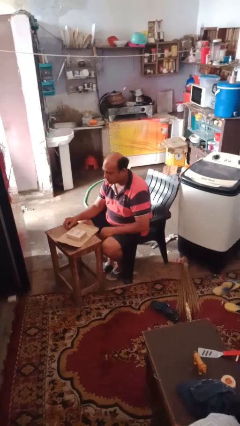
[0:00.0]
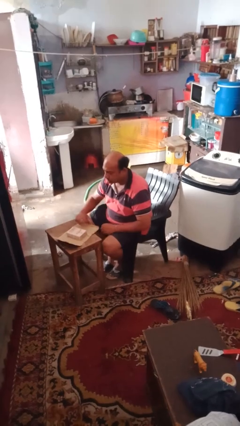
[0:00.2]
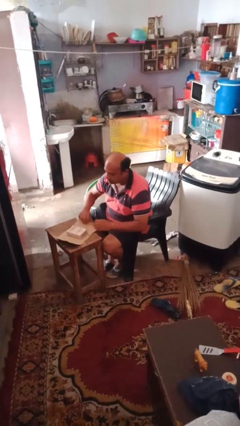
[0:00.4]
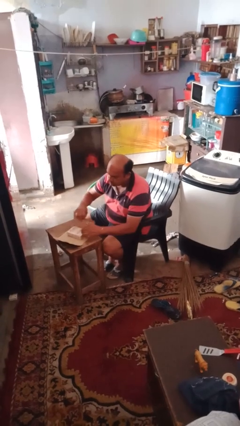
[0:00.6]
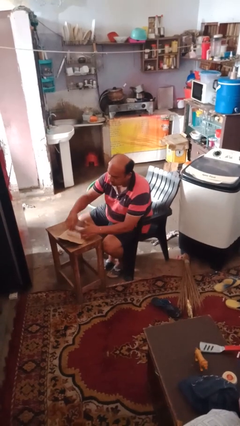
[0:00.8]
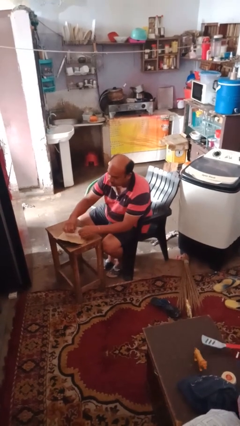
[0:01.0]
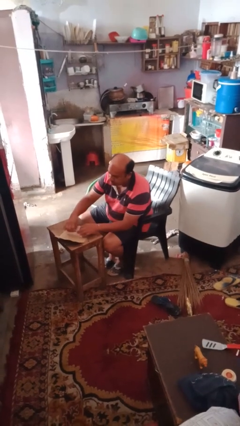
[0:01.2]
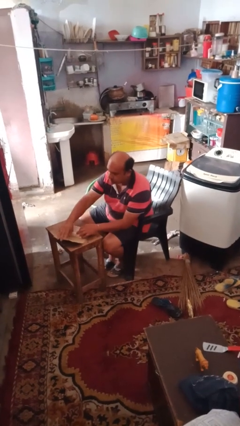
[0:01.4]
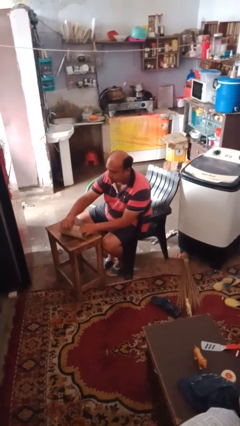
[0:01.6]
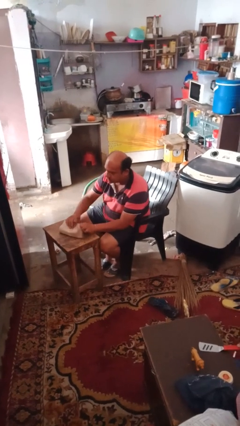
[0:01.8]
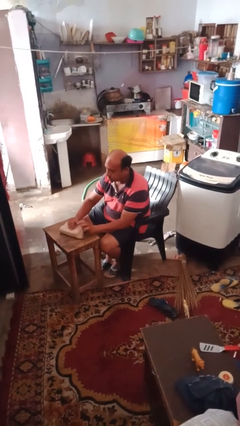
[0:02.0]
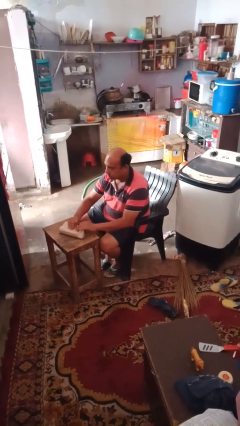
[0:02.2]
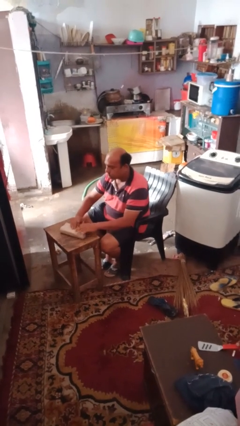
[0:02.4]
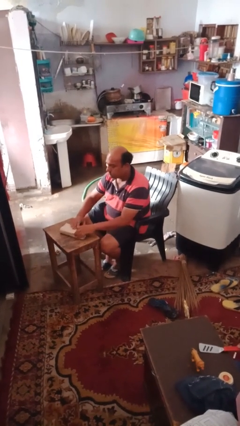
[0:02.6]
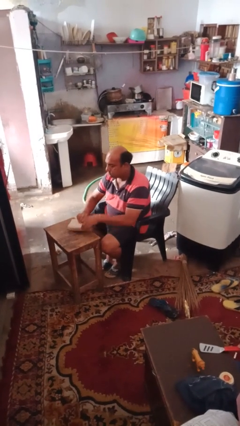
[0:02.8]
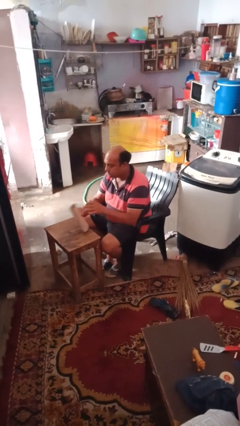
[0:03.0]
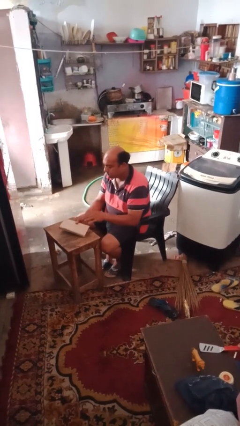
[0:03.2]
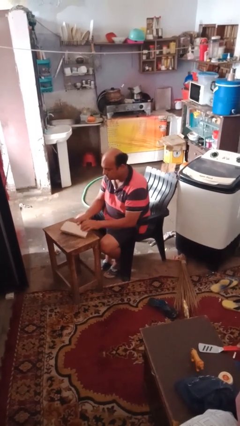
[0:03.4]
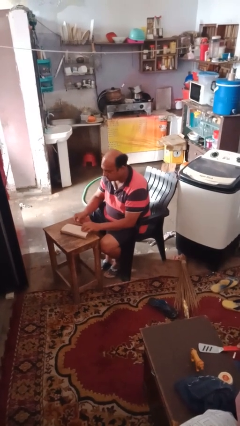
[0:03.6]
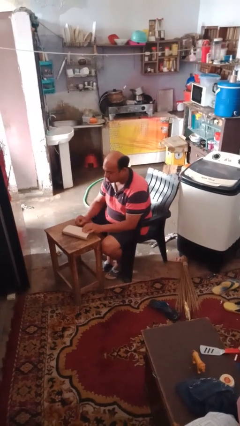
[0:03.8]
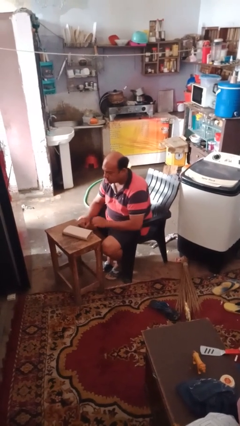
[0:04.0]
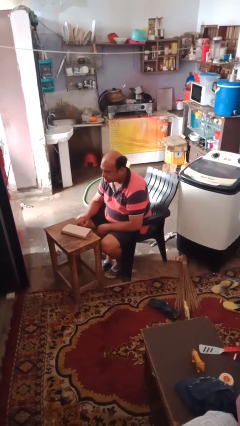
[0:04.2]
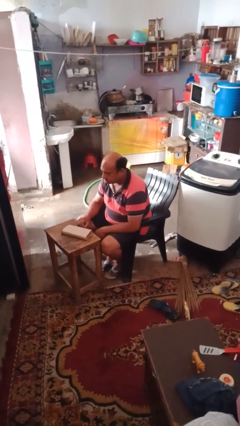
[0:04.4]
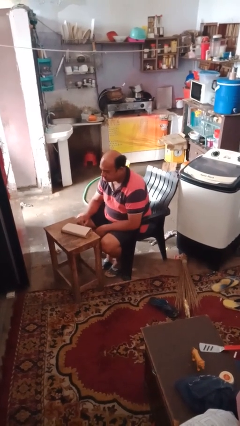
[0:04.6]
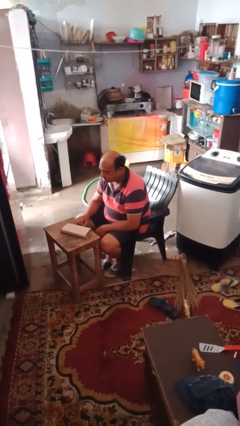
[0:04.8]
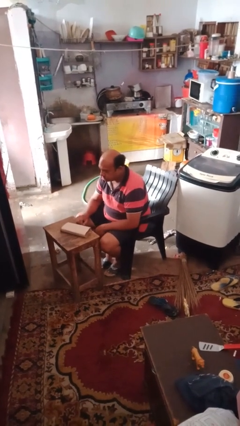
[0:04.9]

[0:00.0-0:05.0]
person wraps box

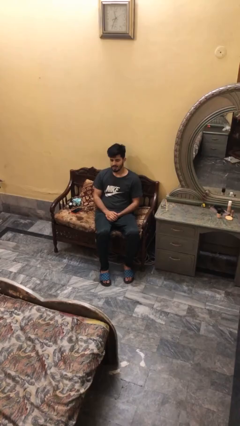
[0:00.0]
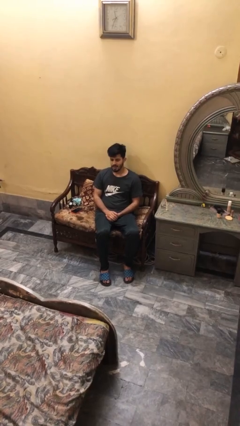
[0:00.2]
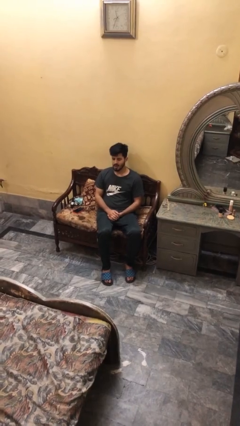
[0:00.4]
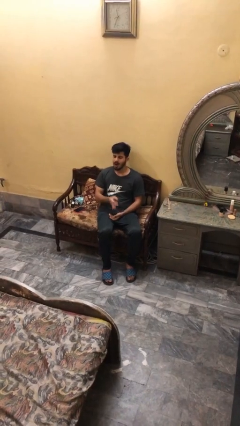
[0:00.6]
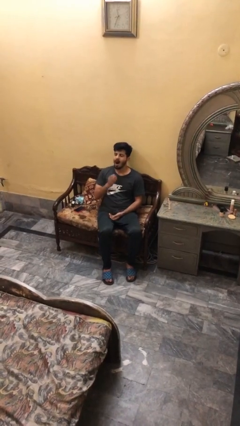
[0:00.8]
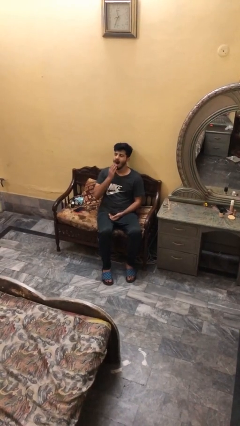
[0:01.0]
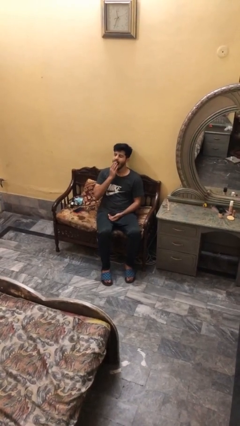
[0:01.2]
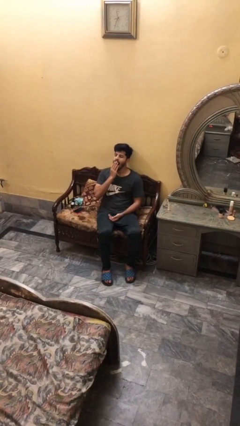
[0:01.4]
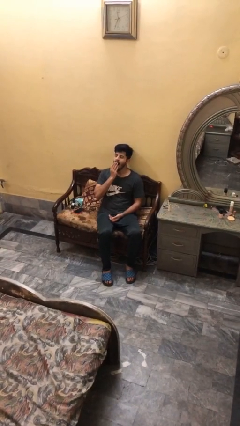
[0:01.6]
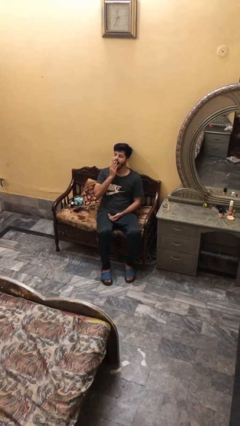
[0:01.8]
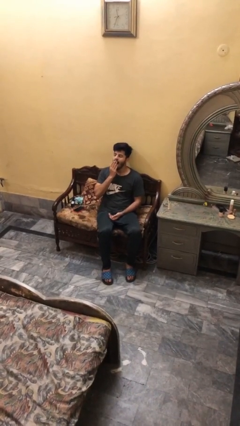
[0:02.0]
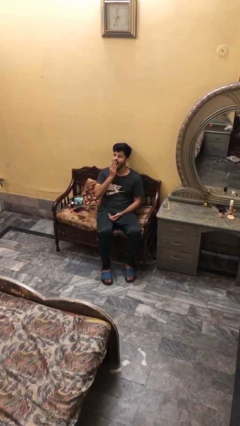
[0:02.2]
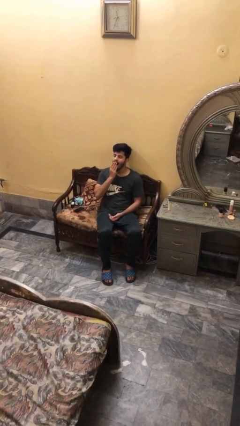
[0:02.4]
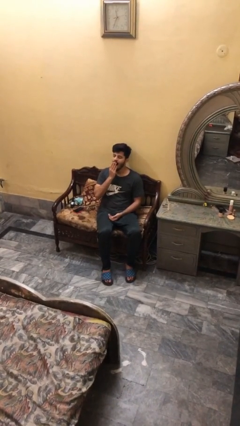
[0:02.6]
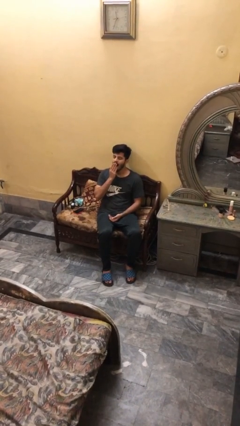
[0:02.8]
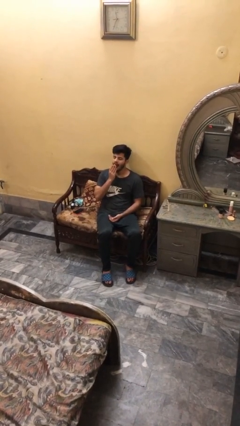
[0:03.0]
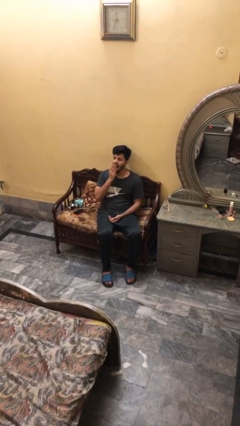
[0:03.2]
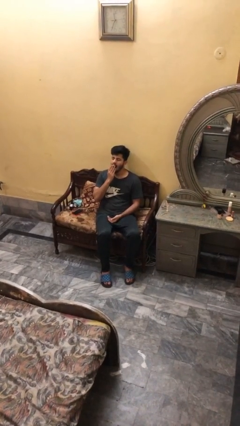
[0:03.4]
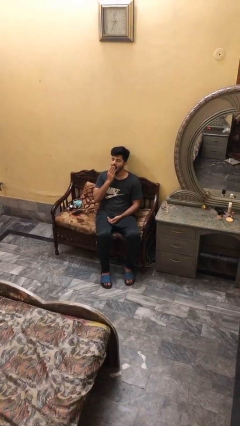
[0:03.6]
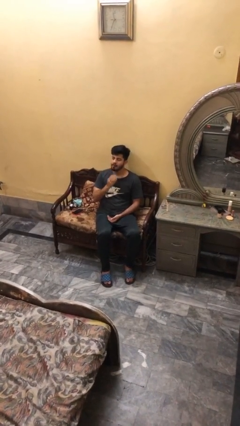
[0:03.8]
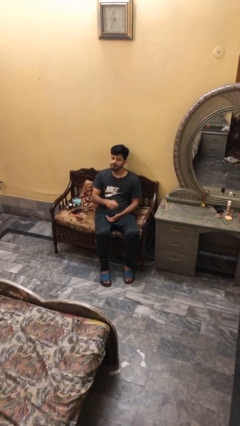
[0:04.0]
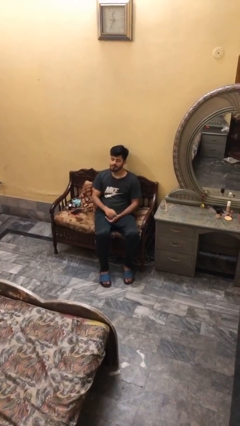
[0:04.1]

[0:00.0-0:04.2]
person yawns

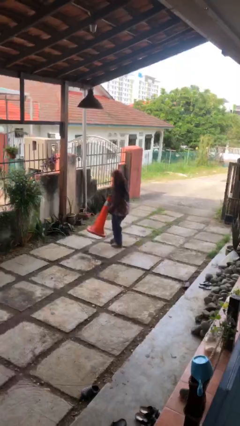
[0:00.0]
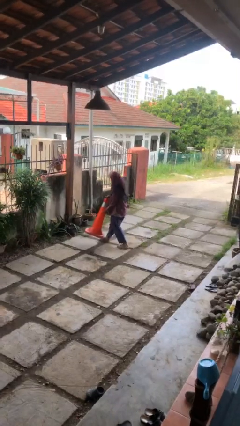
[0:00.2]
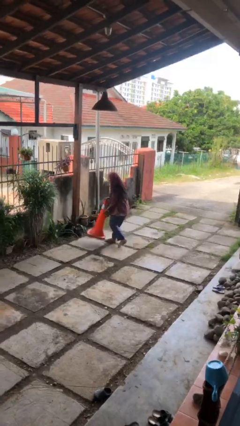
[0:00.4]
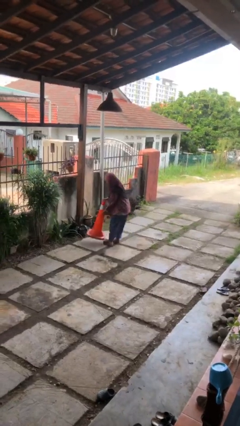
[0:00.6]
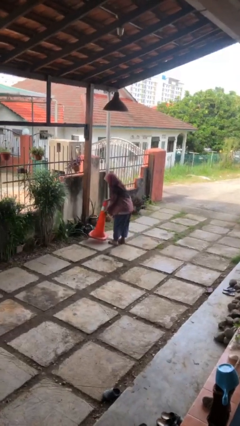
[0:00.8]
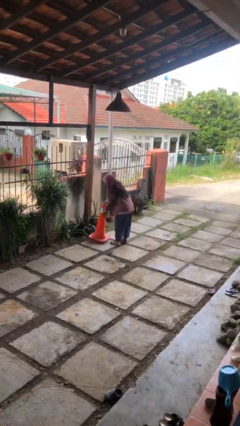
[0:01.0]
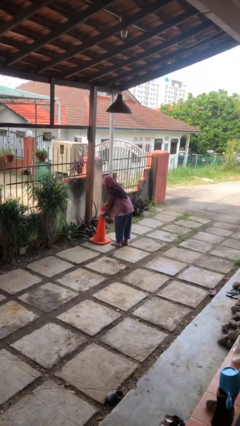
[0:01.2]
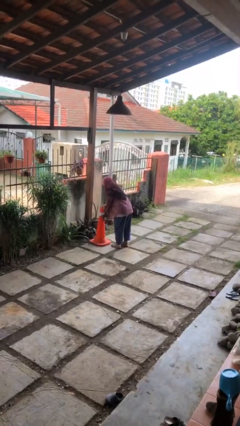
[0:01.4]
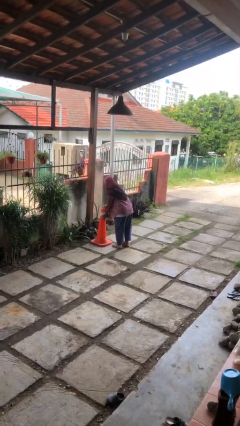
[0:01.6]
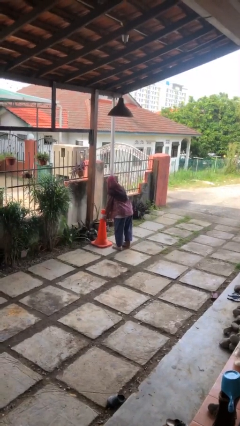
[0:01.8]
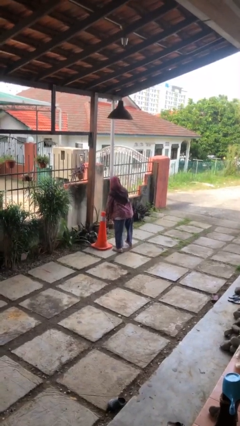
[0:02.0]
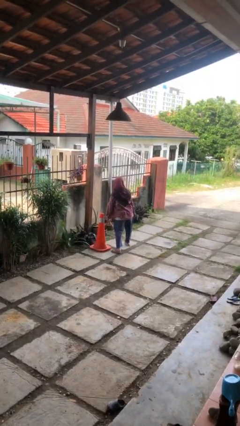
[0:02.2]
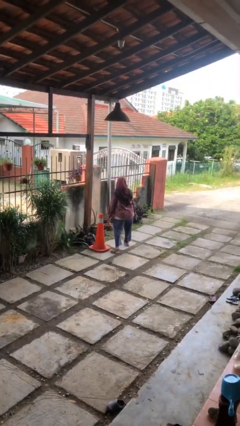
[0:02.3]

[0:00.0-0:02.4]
person puts down object on floor

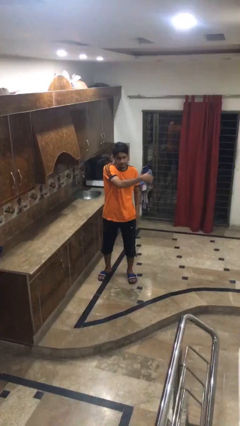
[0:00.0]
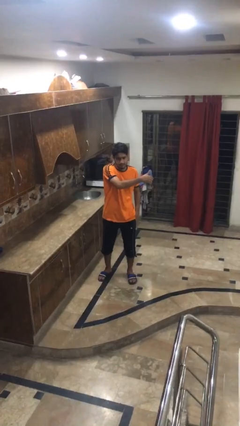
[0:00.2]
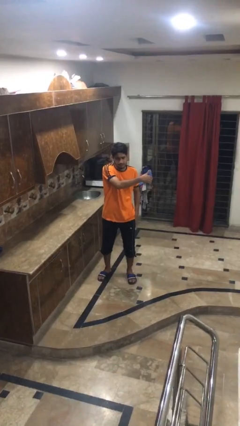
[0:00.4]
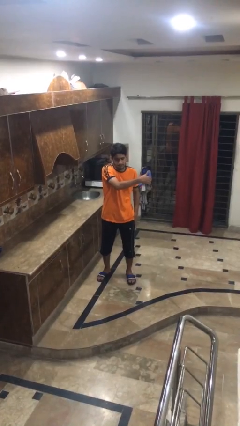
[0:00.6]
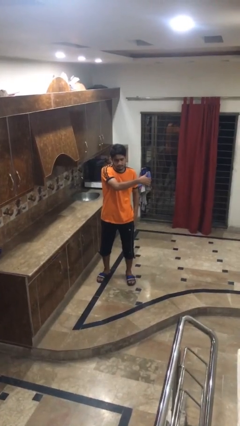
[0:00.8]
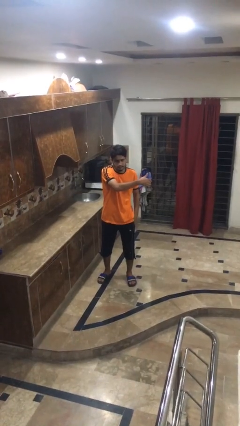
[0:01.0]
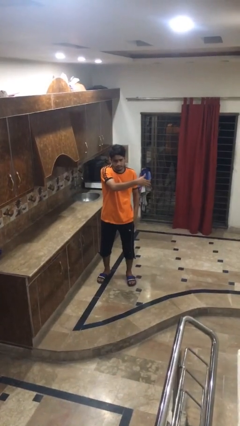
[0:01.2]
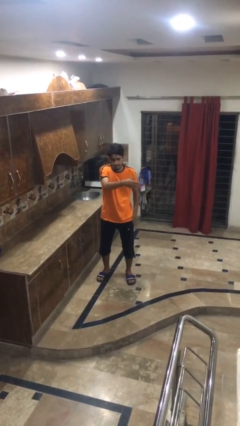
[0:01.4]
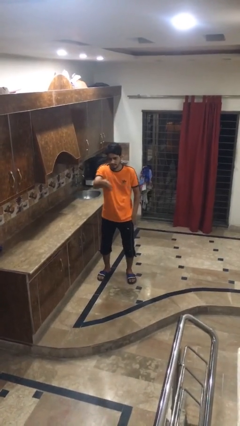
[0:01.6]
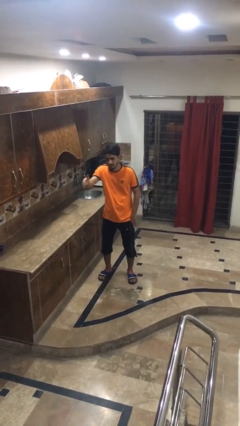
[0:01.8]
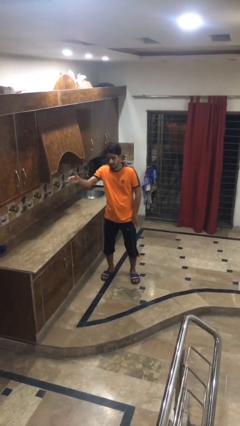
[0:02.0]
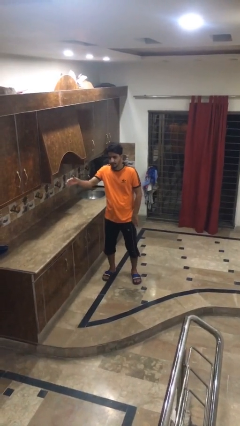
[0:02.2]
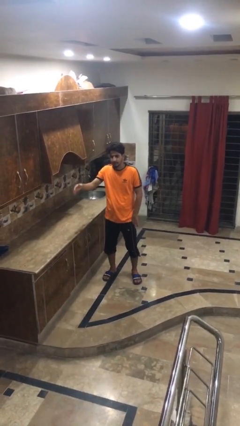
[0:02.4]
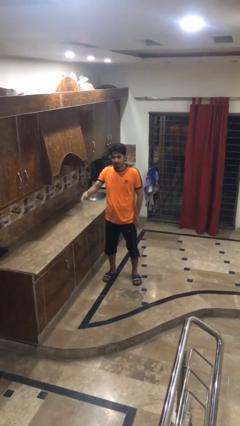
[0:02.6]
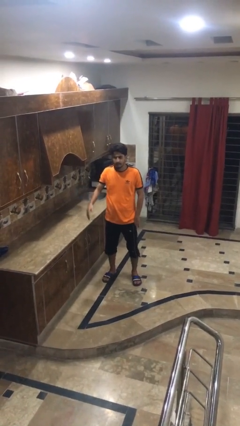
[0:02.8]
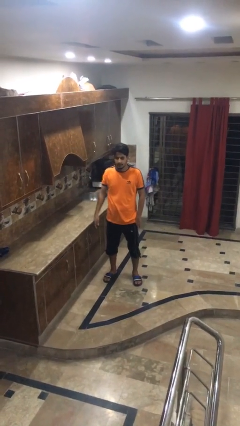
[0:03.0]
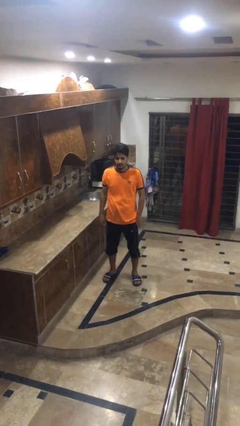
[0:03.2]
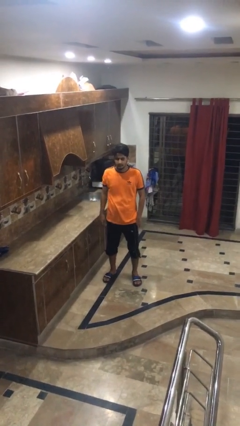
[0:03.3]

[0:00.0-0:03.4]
person gestures swipe right

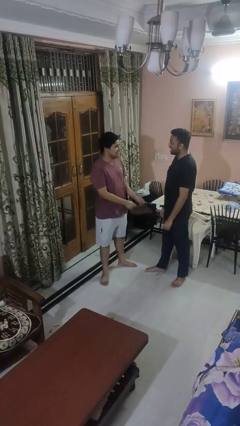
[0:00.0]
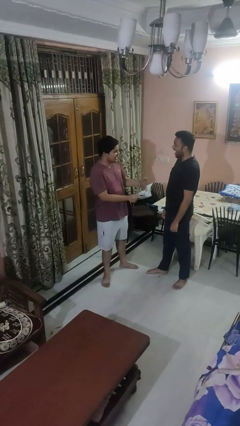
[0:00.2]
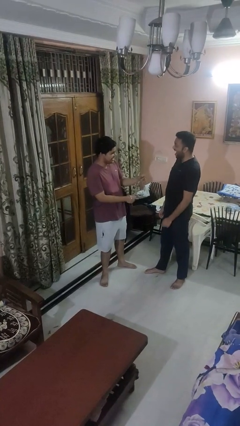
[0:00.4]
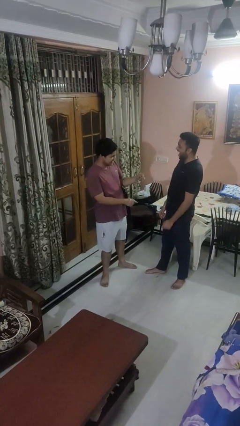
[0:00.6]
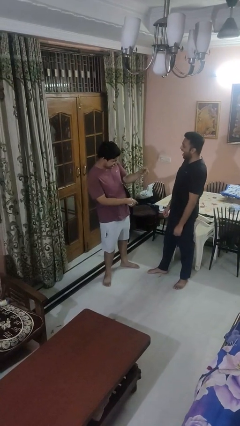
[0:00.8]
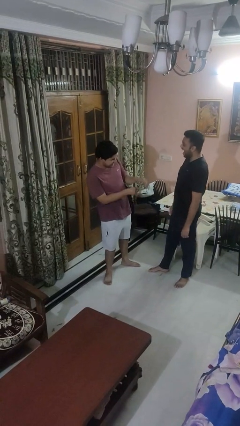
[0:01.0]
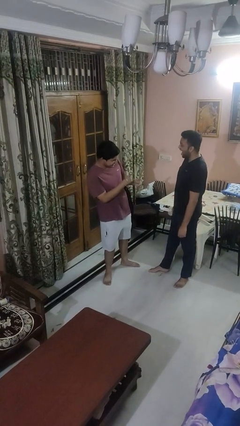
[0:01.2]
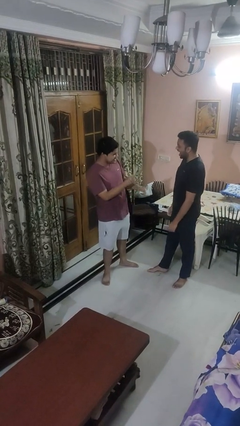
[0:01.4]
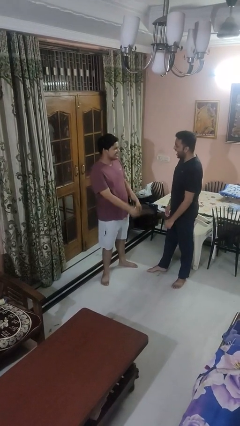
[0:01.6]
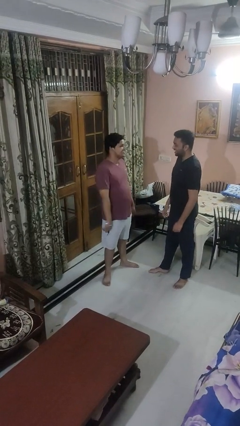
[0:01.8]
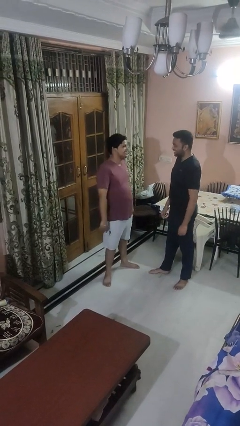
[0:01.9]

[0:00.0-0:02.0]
person laughs with person

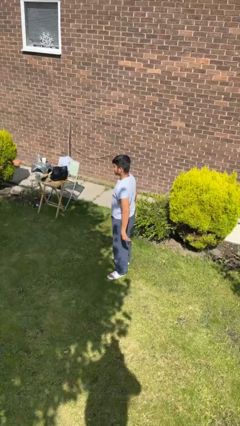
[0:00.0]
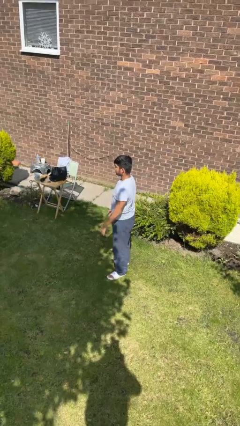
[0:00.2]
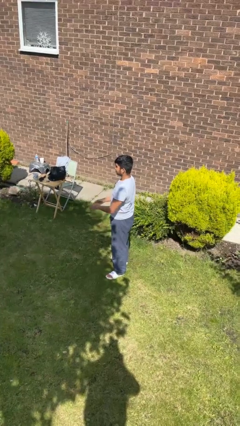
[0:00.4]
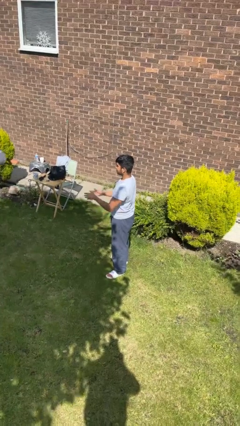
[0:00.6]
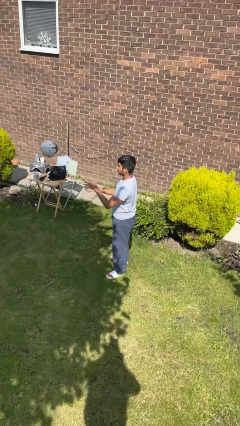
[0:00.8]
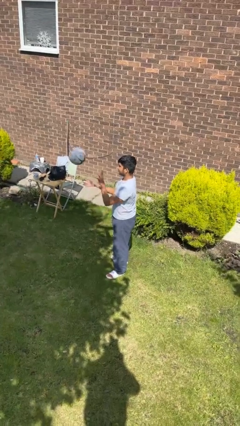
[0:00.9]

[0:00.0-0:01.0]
person catches object from person
